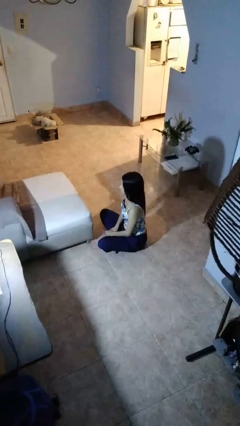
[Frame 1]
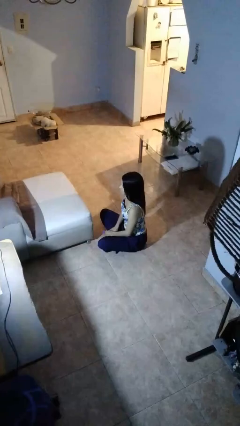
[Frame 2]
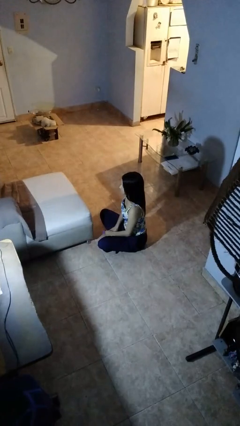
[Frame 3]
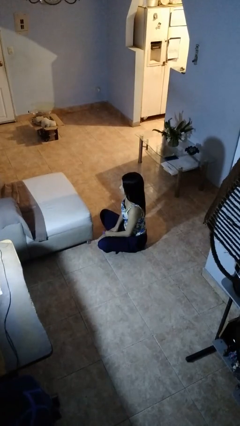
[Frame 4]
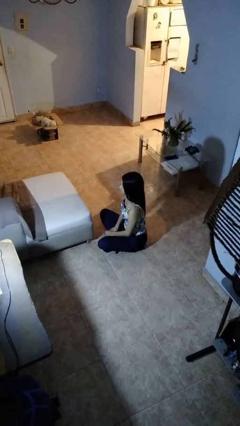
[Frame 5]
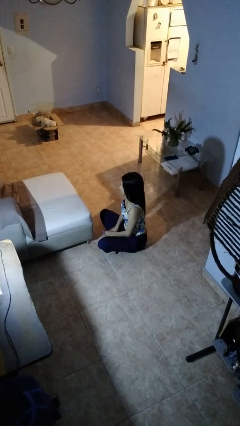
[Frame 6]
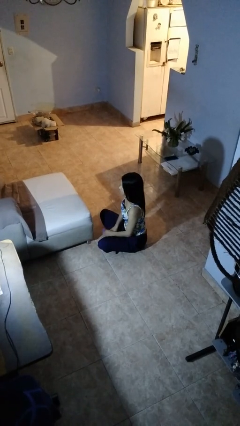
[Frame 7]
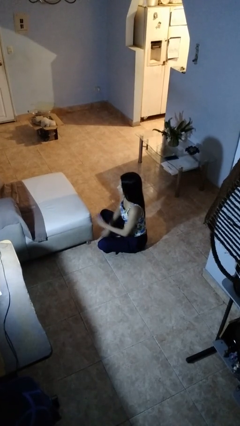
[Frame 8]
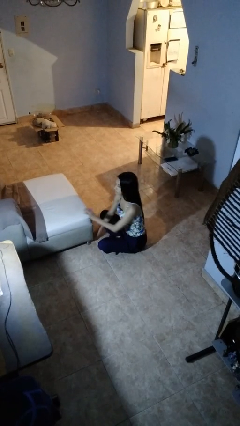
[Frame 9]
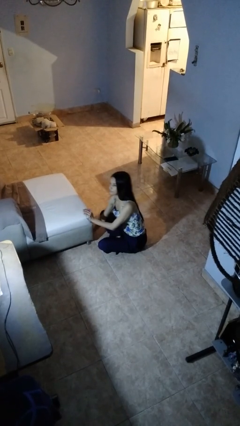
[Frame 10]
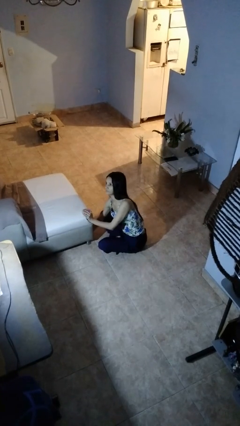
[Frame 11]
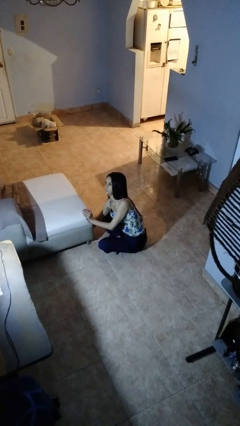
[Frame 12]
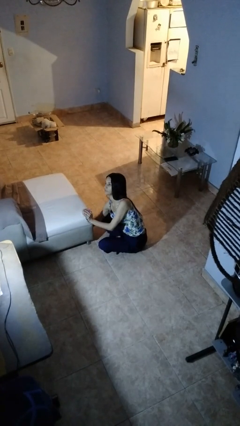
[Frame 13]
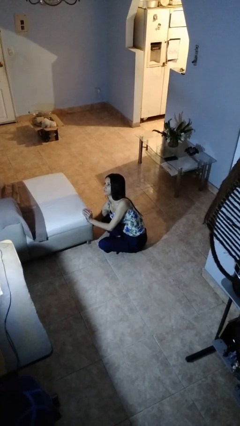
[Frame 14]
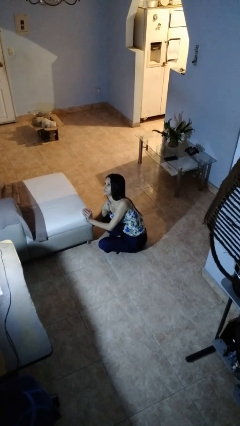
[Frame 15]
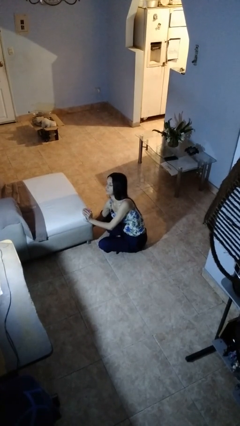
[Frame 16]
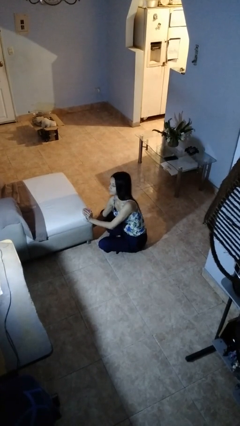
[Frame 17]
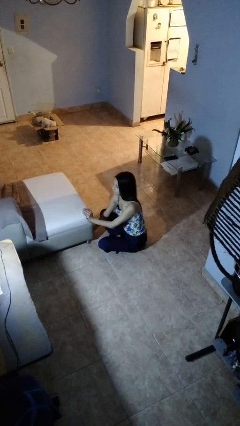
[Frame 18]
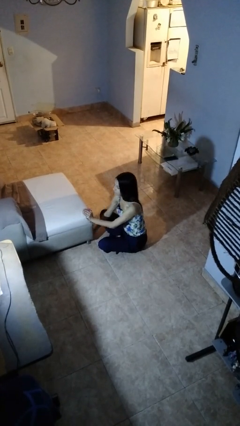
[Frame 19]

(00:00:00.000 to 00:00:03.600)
person searches under couch

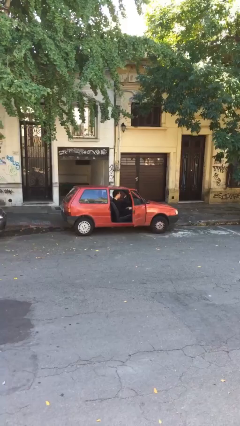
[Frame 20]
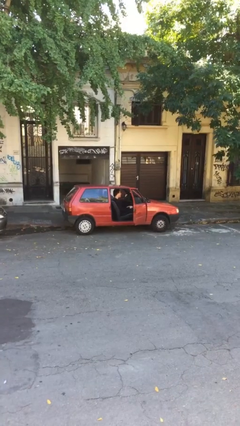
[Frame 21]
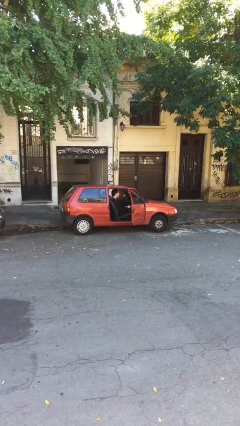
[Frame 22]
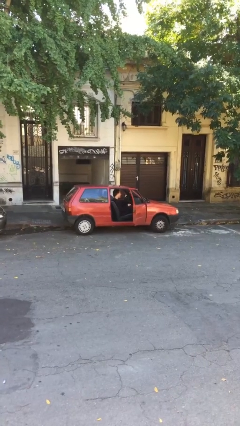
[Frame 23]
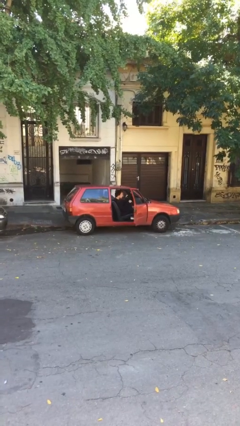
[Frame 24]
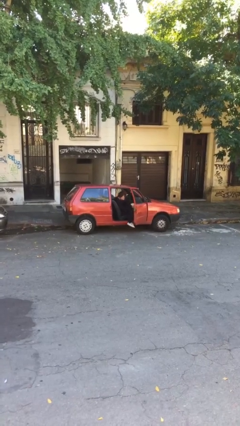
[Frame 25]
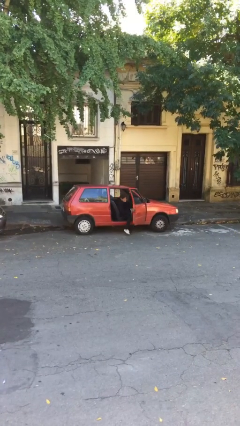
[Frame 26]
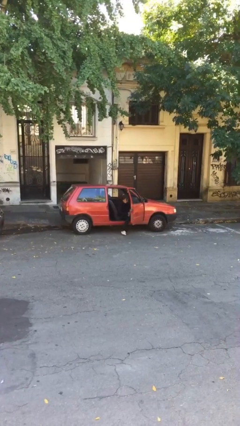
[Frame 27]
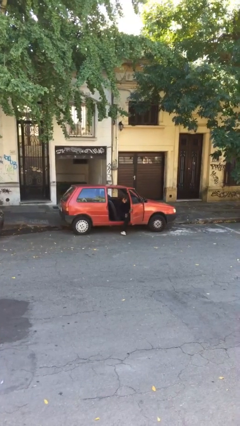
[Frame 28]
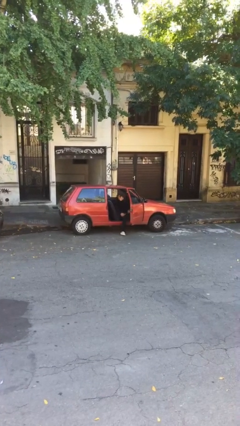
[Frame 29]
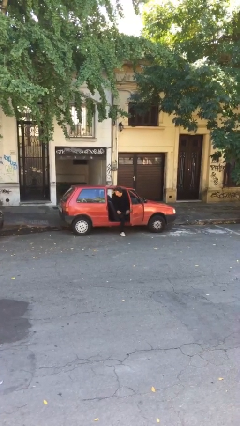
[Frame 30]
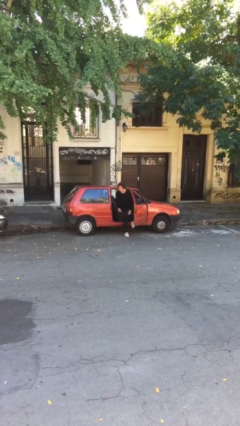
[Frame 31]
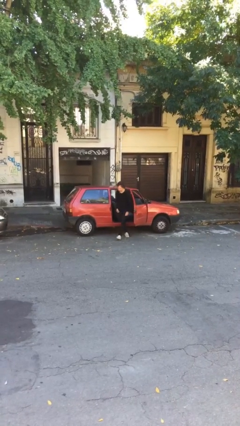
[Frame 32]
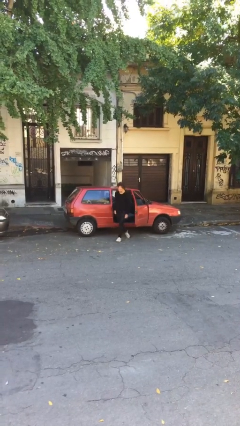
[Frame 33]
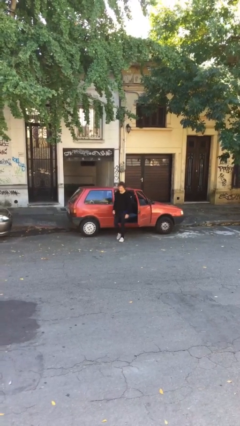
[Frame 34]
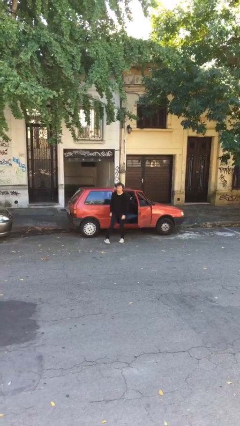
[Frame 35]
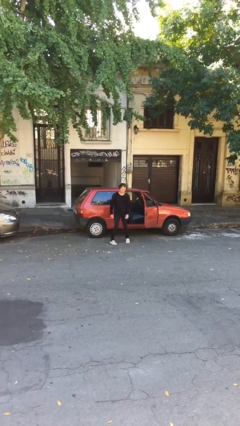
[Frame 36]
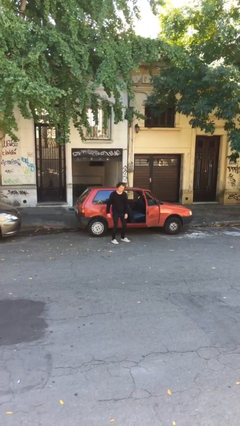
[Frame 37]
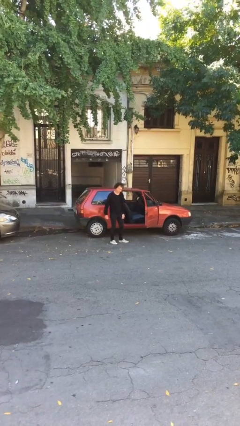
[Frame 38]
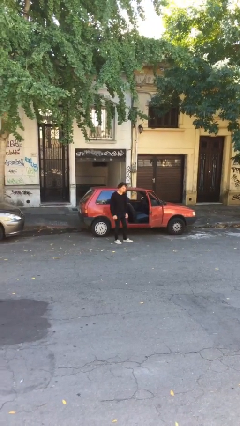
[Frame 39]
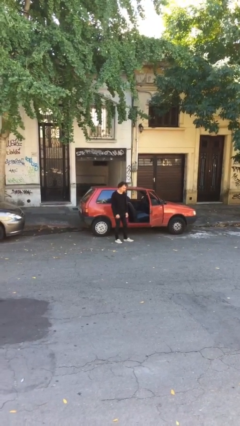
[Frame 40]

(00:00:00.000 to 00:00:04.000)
person exits car

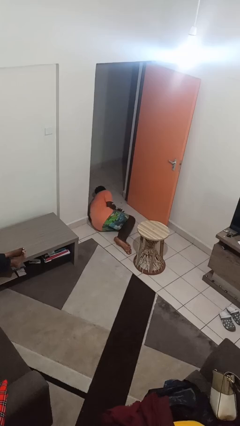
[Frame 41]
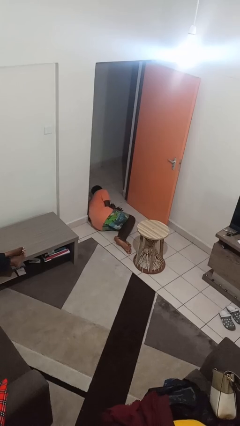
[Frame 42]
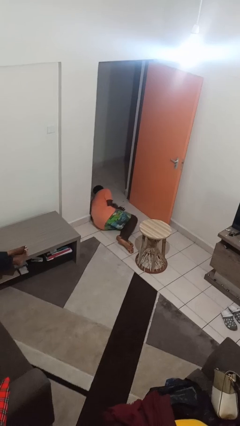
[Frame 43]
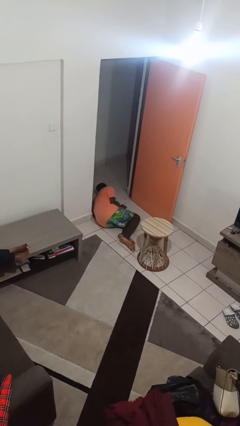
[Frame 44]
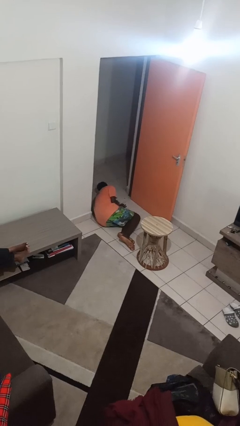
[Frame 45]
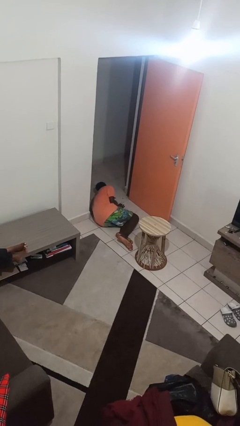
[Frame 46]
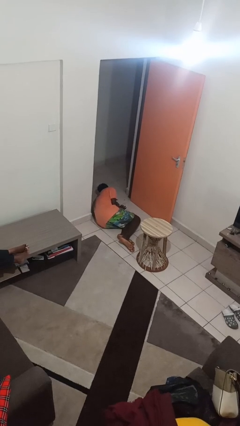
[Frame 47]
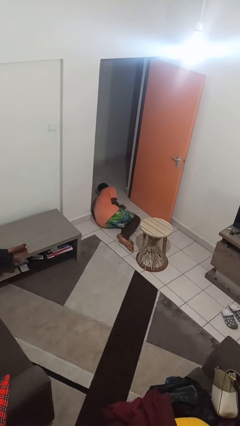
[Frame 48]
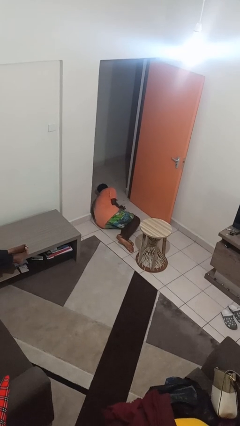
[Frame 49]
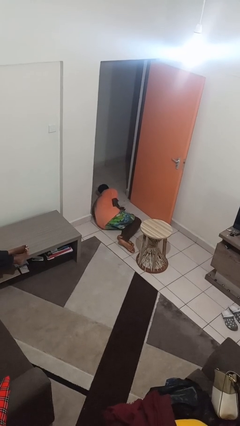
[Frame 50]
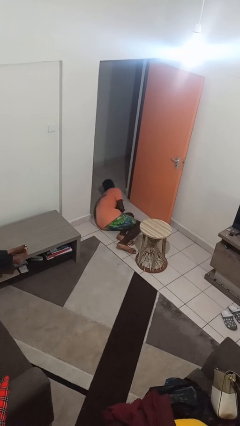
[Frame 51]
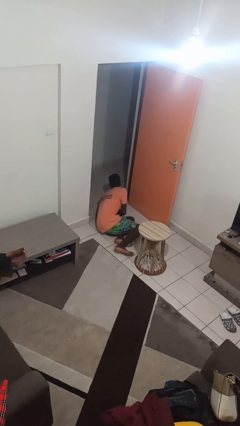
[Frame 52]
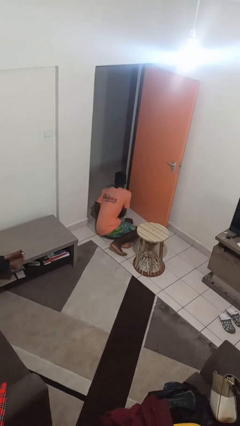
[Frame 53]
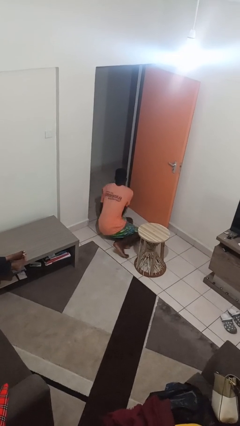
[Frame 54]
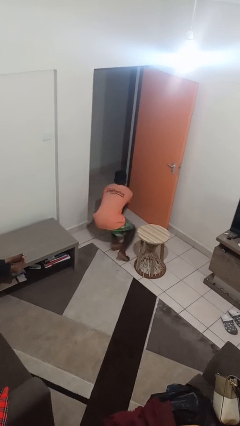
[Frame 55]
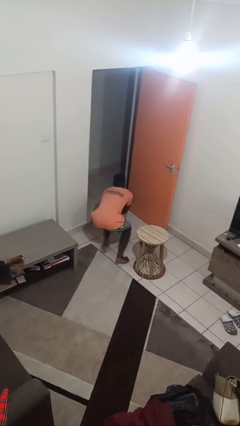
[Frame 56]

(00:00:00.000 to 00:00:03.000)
person lies down on floor

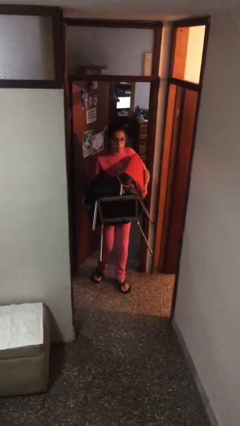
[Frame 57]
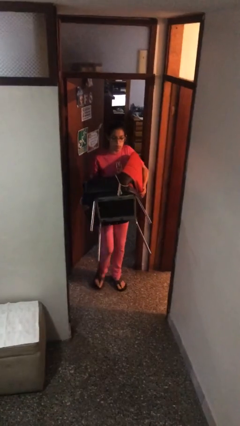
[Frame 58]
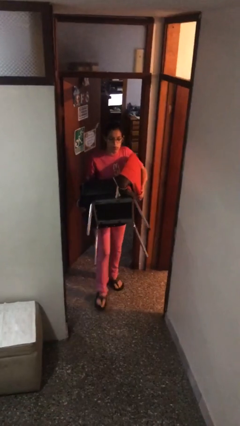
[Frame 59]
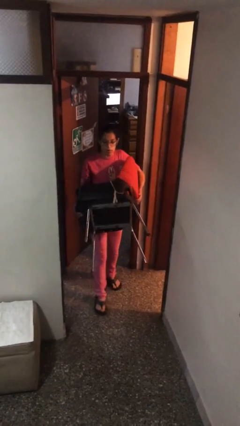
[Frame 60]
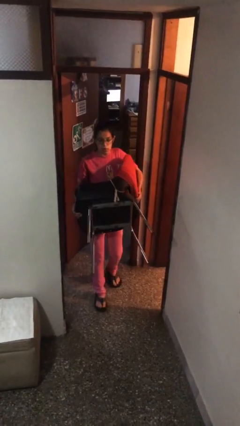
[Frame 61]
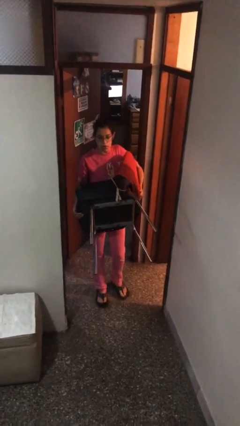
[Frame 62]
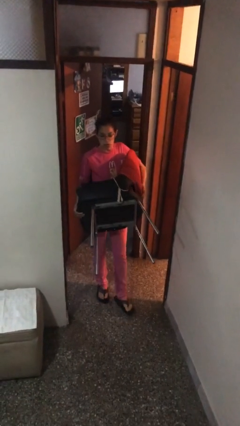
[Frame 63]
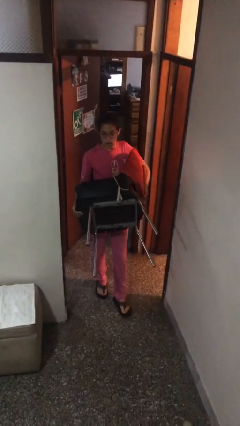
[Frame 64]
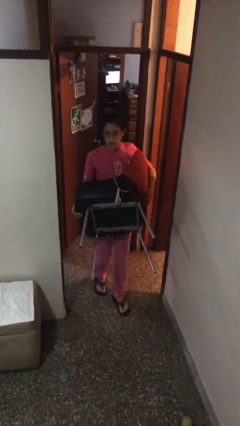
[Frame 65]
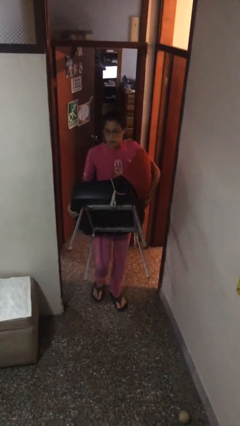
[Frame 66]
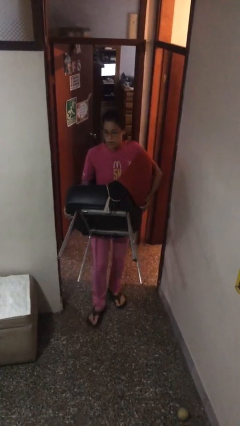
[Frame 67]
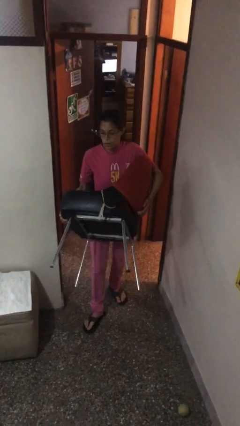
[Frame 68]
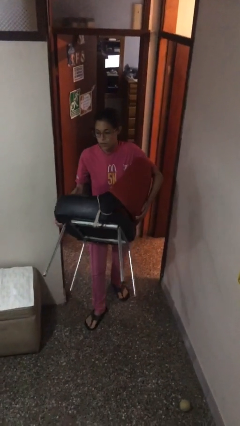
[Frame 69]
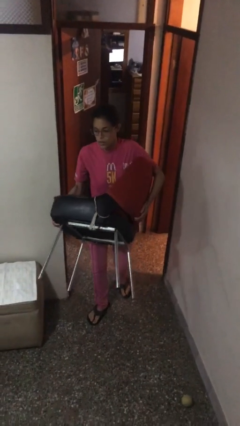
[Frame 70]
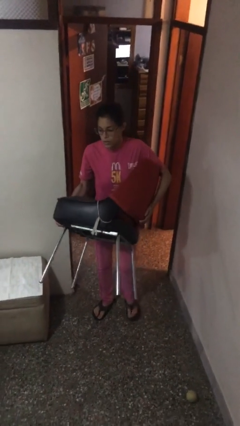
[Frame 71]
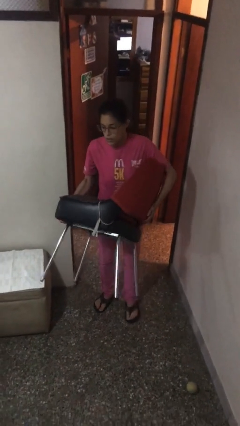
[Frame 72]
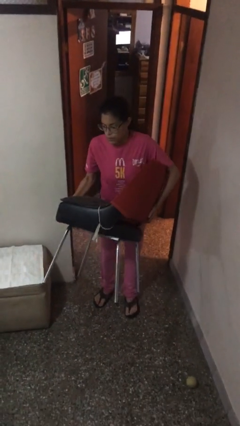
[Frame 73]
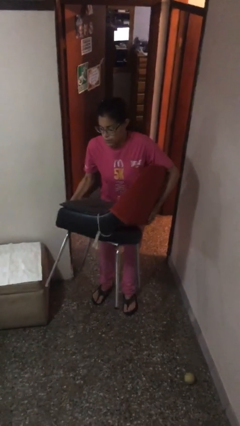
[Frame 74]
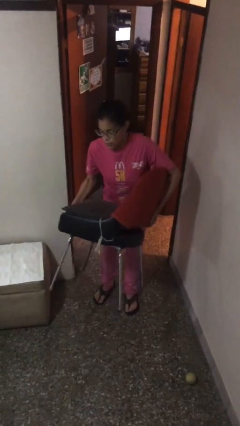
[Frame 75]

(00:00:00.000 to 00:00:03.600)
person carries heavy object

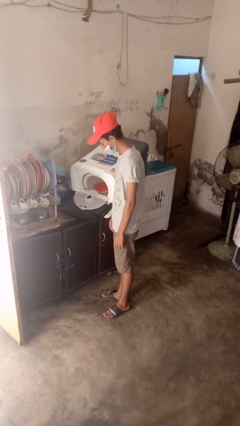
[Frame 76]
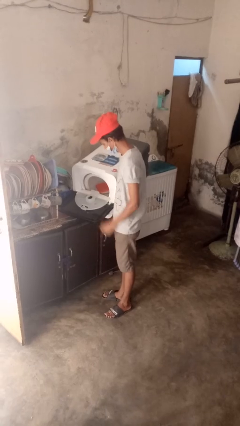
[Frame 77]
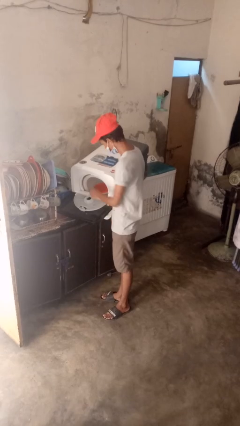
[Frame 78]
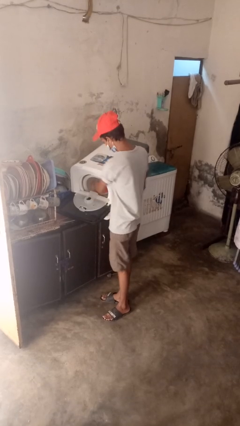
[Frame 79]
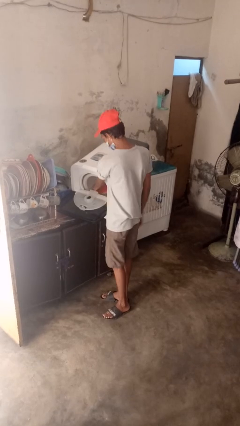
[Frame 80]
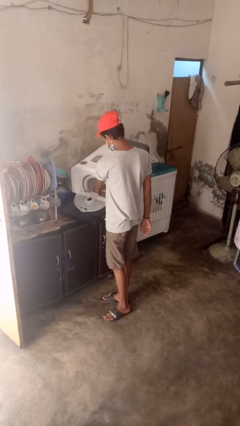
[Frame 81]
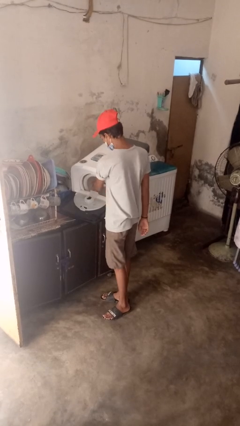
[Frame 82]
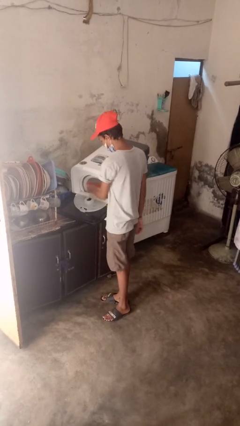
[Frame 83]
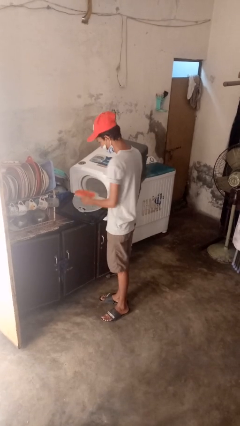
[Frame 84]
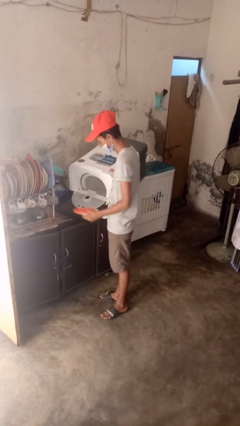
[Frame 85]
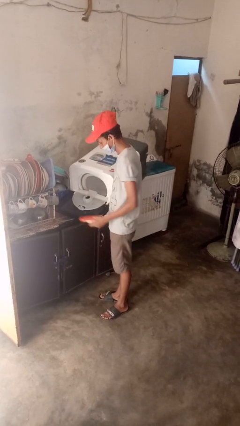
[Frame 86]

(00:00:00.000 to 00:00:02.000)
person unloads dishwasher

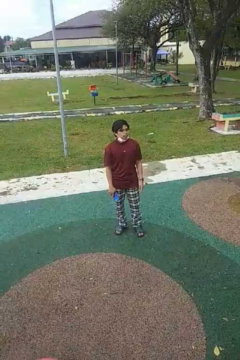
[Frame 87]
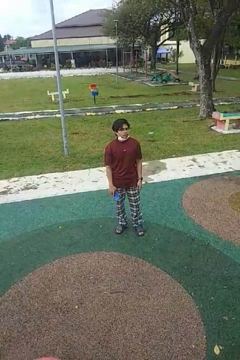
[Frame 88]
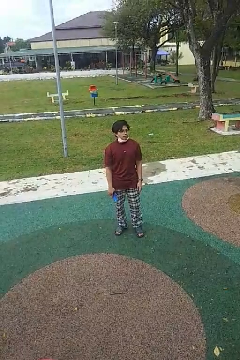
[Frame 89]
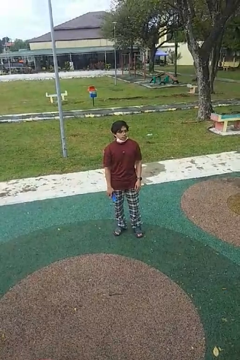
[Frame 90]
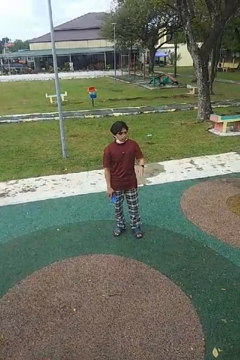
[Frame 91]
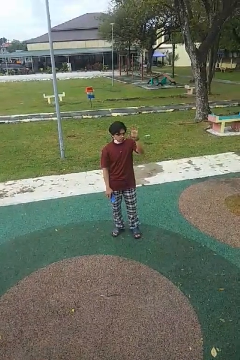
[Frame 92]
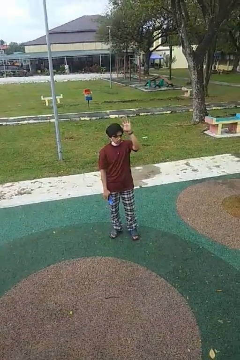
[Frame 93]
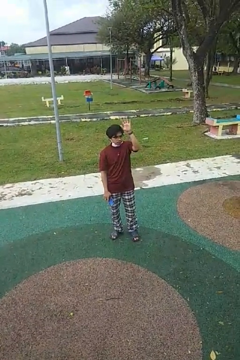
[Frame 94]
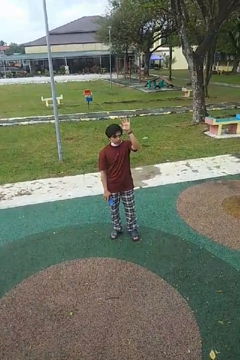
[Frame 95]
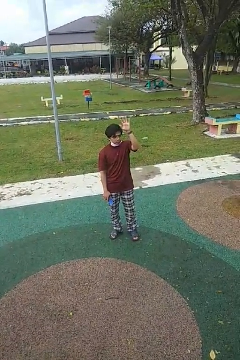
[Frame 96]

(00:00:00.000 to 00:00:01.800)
person gestures raise hand
